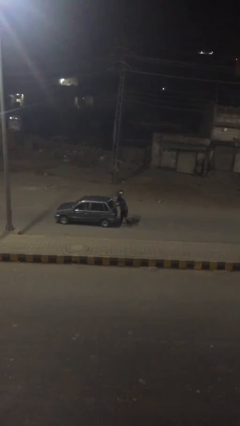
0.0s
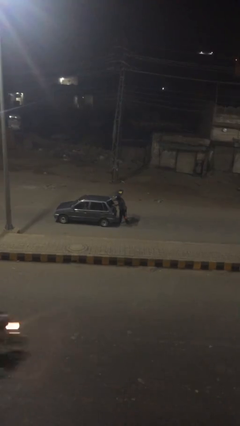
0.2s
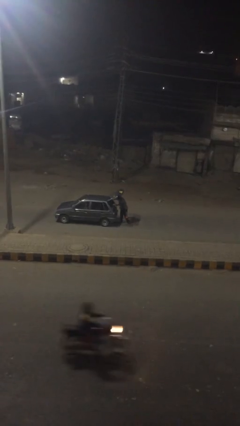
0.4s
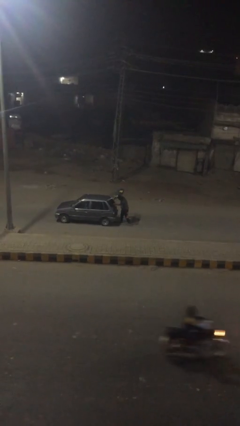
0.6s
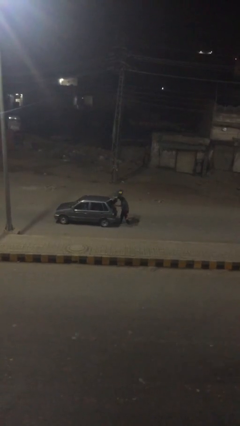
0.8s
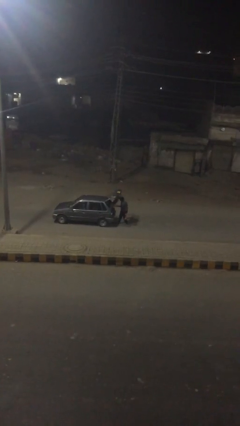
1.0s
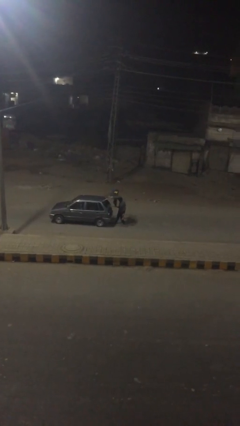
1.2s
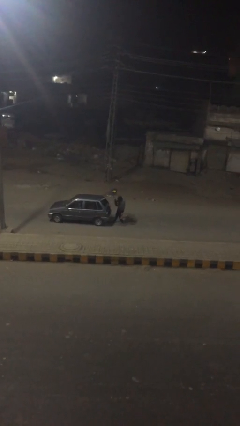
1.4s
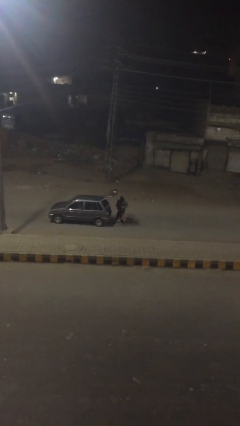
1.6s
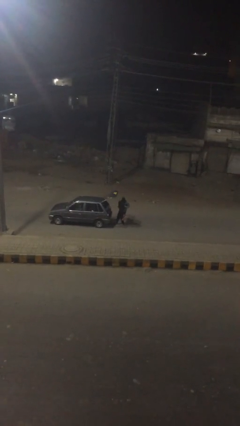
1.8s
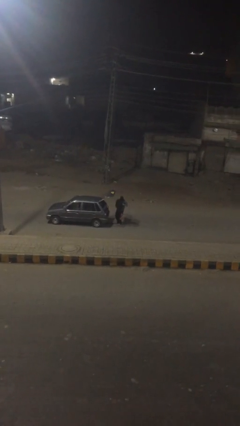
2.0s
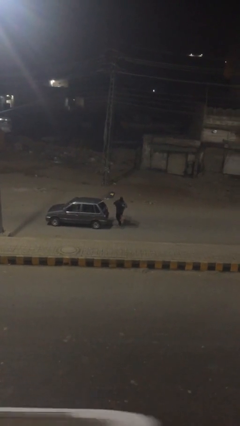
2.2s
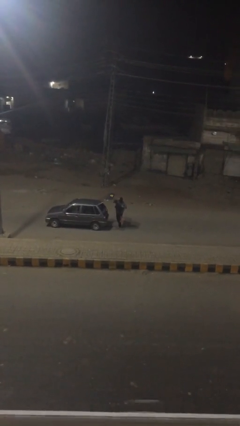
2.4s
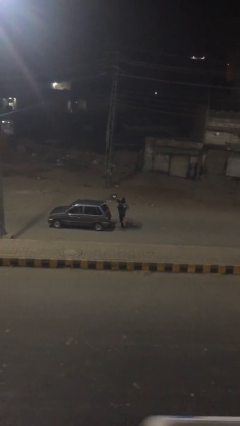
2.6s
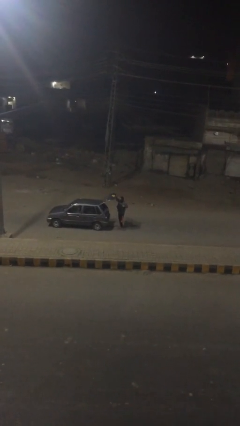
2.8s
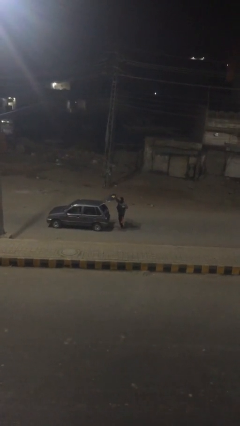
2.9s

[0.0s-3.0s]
person unloads car

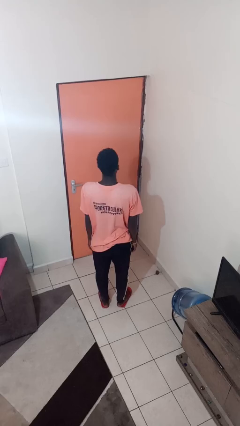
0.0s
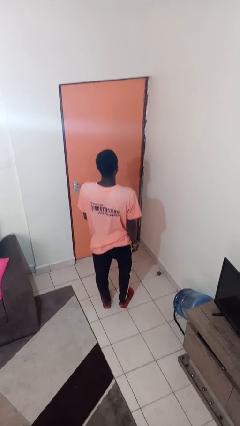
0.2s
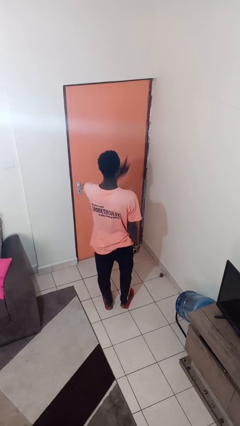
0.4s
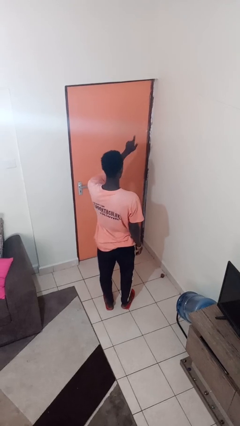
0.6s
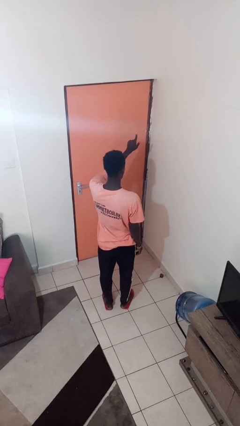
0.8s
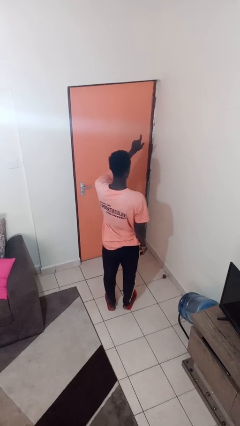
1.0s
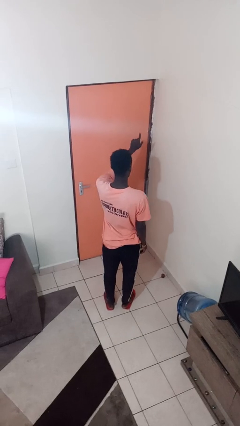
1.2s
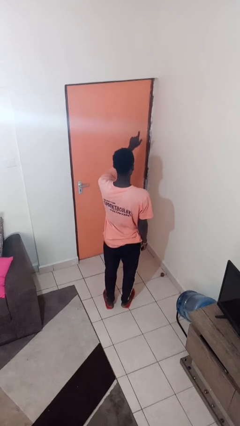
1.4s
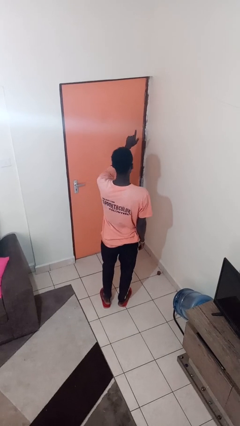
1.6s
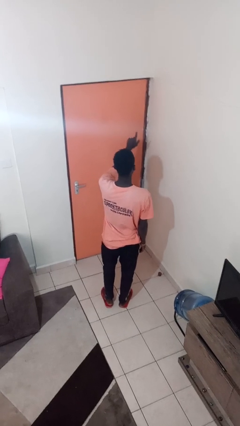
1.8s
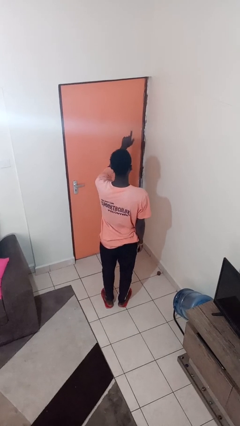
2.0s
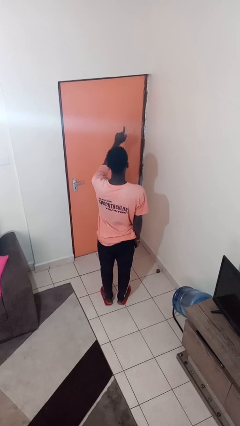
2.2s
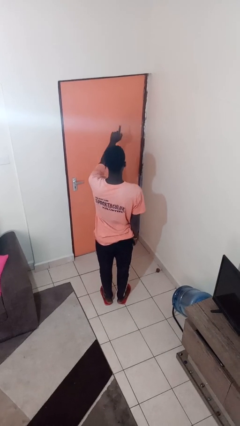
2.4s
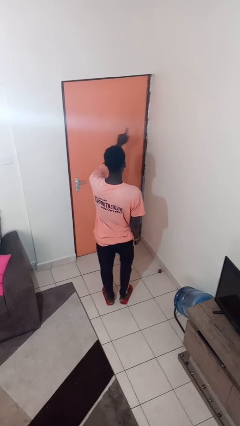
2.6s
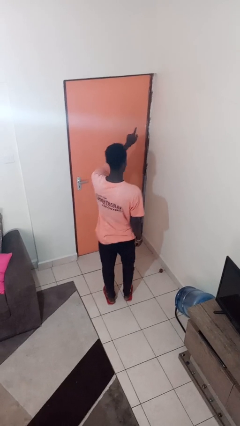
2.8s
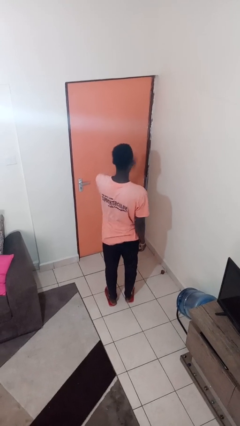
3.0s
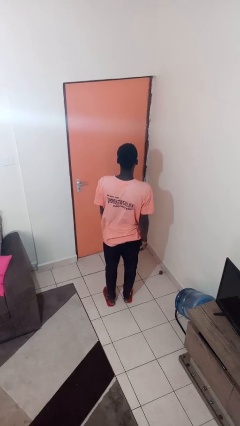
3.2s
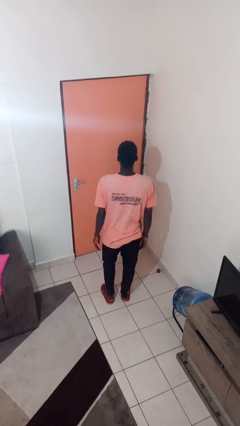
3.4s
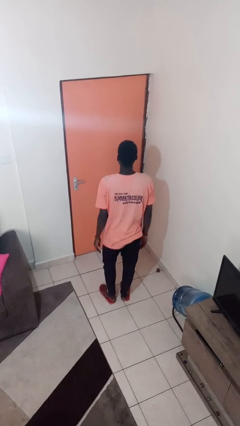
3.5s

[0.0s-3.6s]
person gestures number one

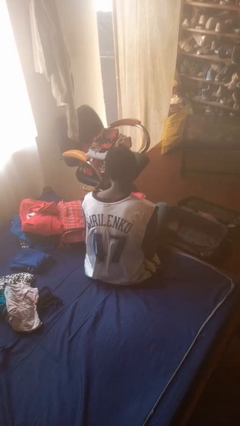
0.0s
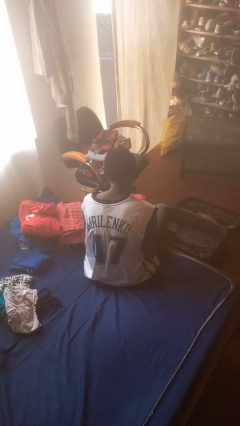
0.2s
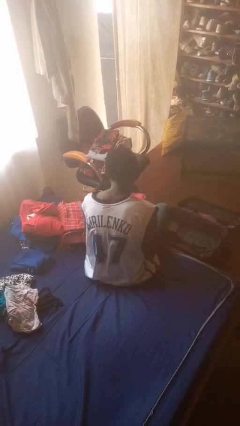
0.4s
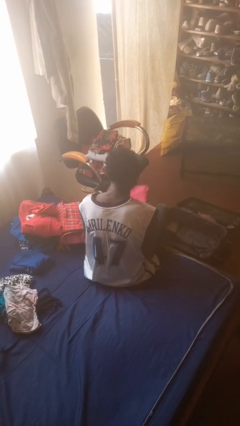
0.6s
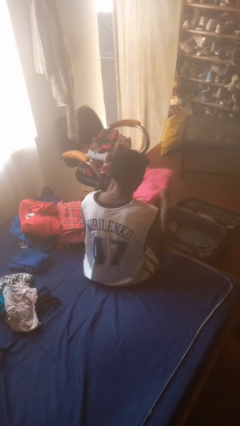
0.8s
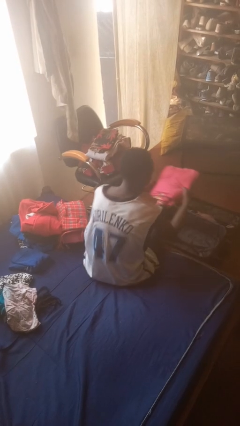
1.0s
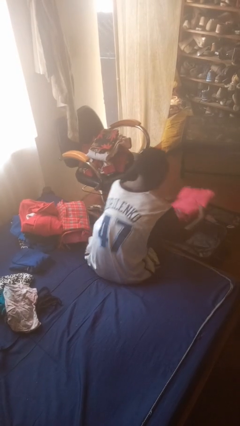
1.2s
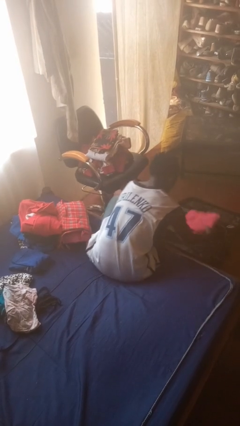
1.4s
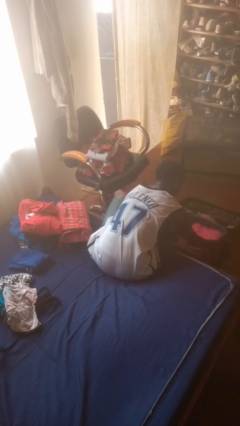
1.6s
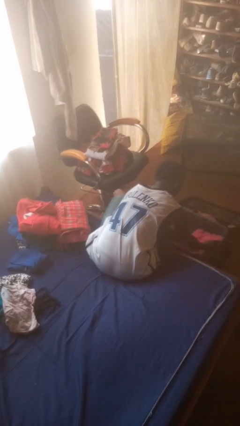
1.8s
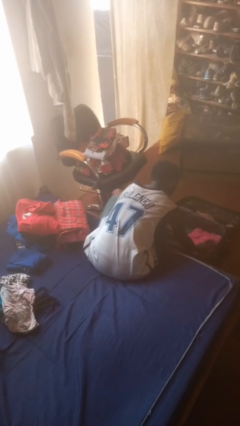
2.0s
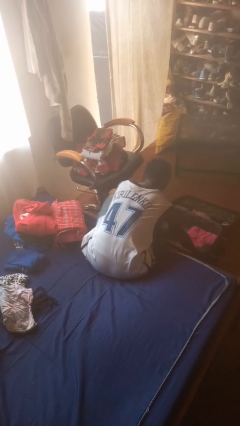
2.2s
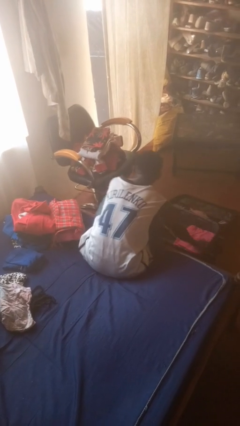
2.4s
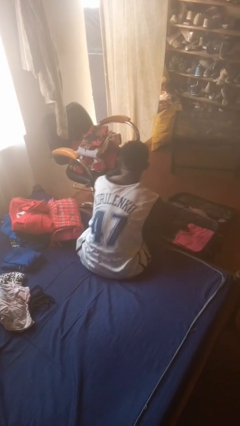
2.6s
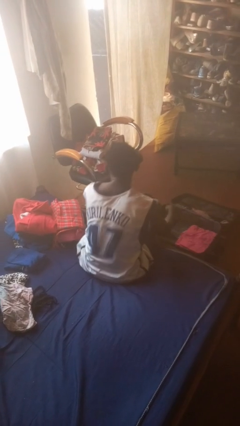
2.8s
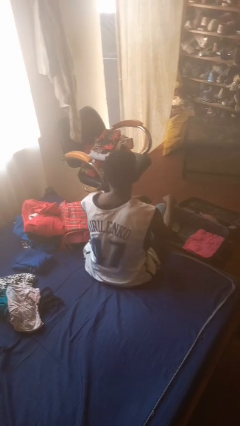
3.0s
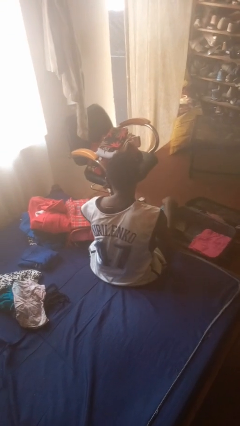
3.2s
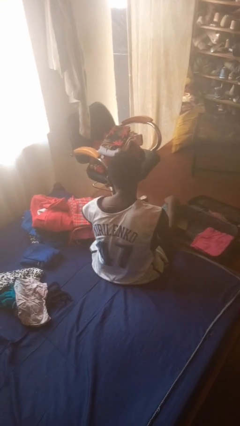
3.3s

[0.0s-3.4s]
person loads clothes into suitcase

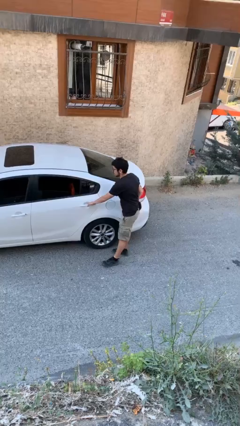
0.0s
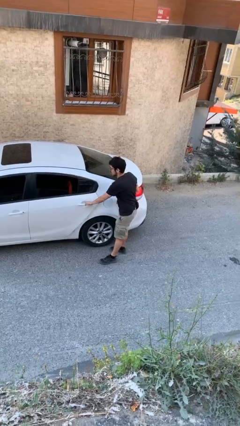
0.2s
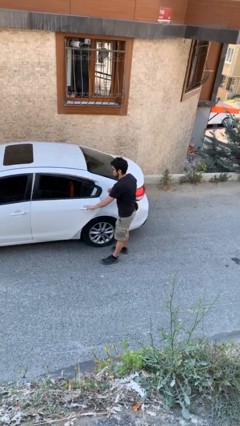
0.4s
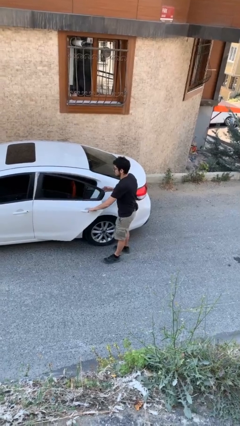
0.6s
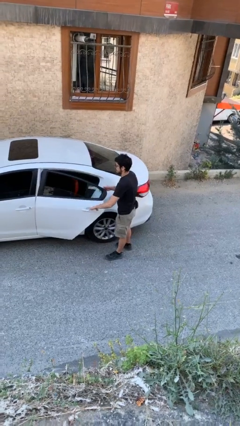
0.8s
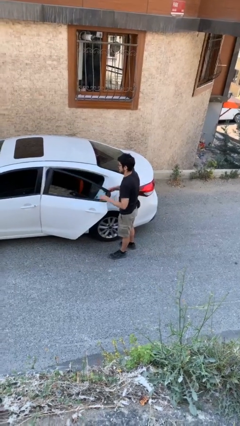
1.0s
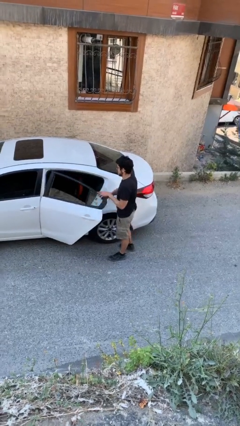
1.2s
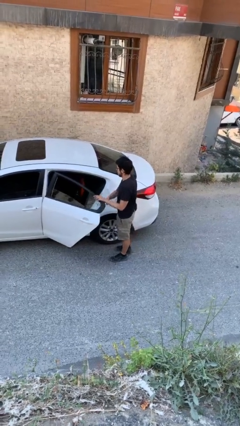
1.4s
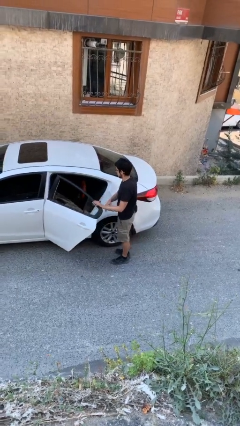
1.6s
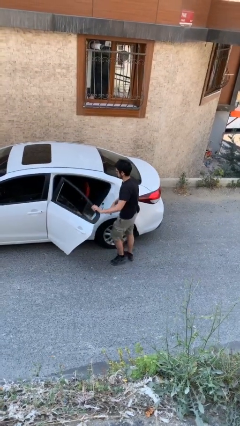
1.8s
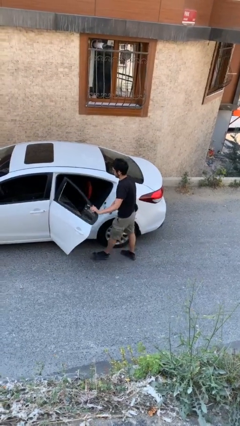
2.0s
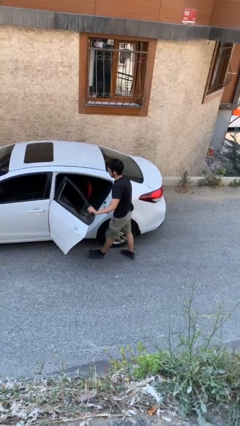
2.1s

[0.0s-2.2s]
person opens car door

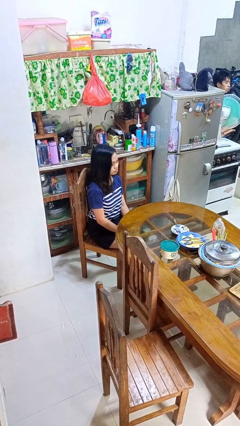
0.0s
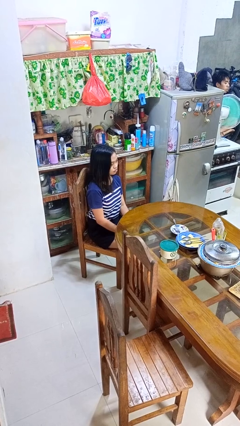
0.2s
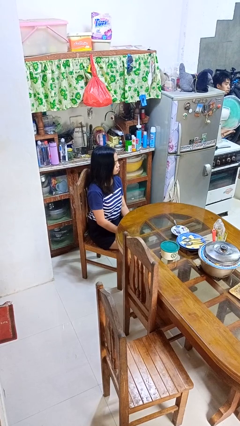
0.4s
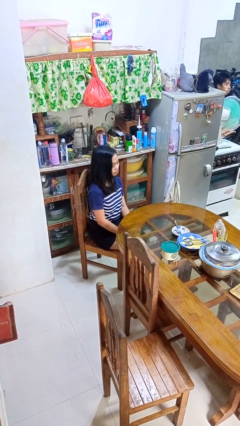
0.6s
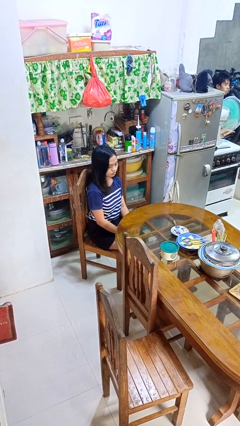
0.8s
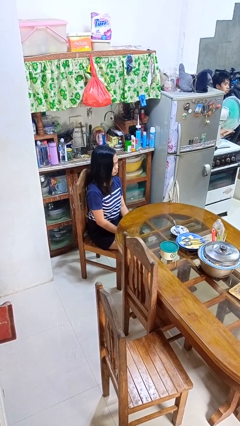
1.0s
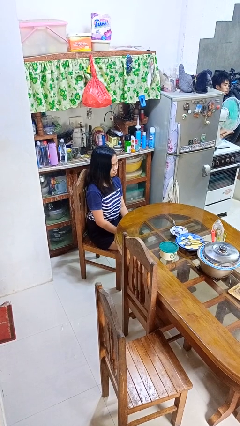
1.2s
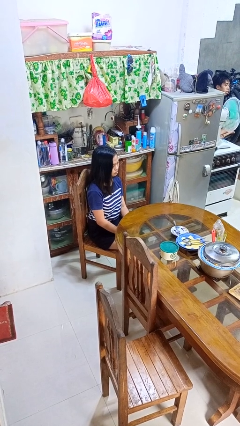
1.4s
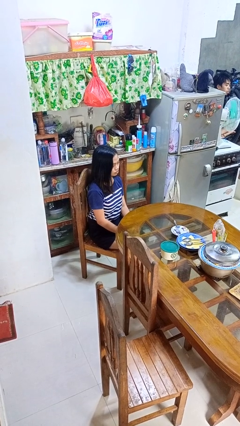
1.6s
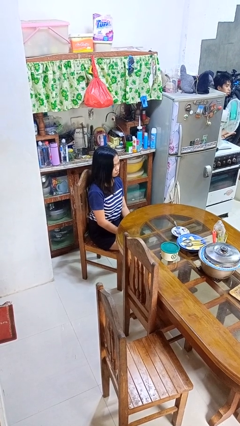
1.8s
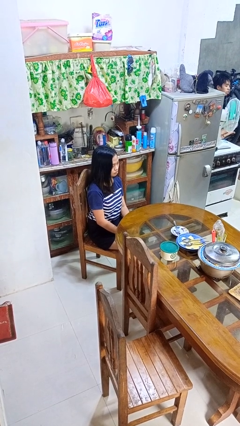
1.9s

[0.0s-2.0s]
person shakes head

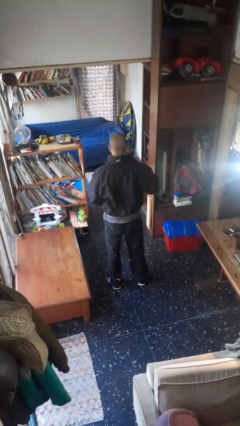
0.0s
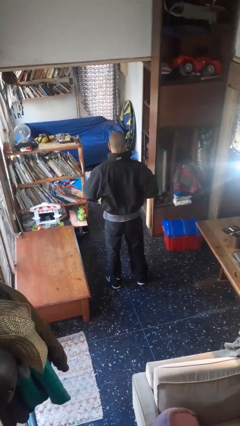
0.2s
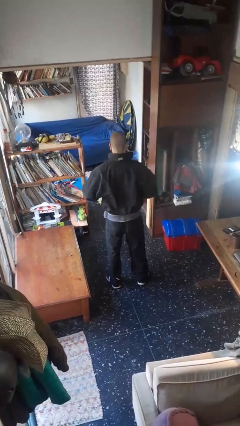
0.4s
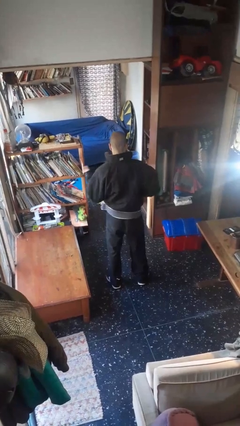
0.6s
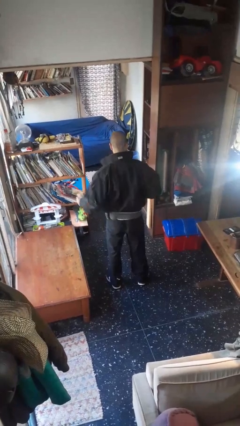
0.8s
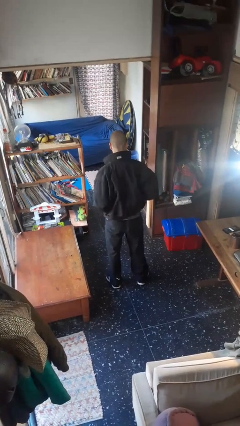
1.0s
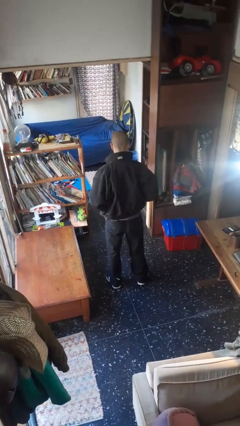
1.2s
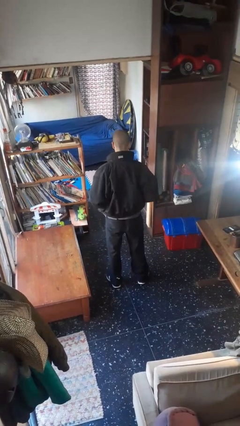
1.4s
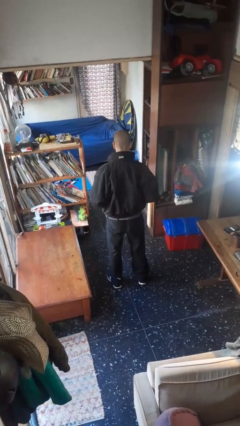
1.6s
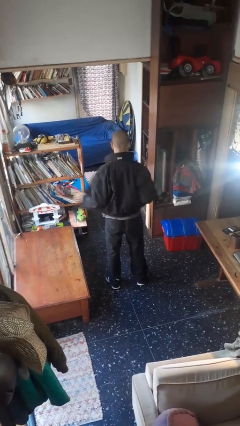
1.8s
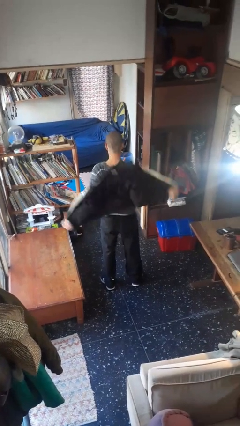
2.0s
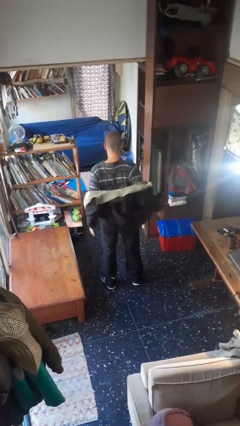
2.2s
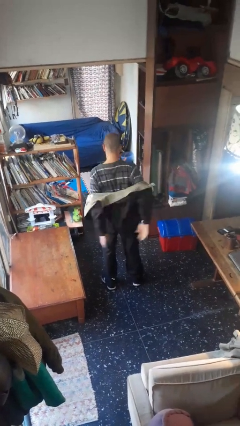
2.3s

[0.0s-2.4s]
person unzips jacket

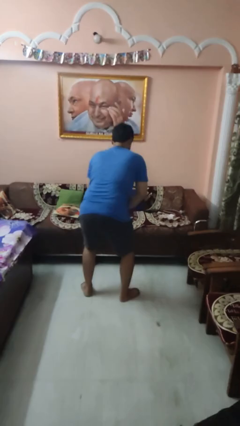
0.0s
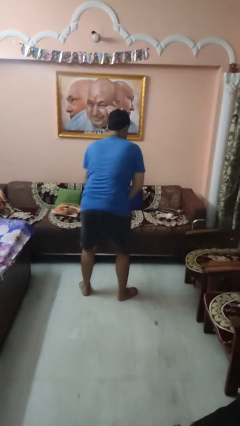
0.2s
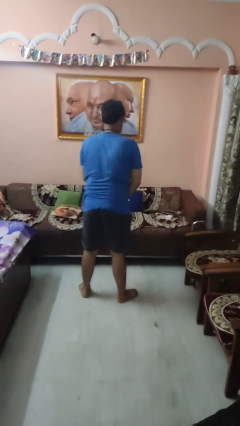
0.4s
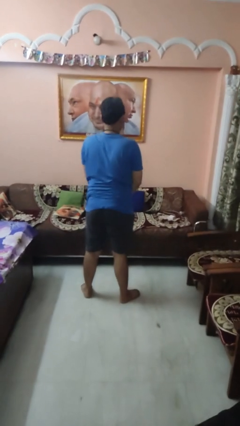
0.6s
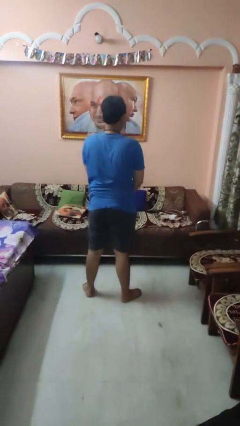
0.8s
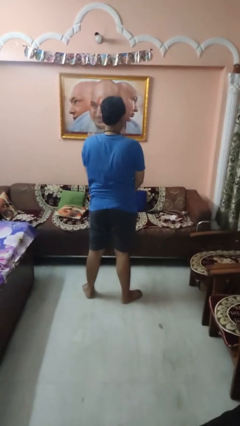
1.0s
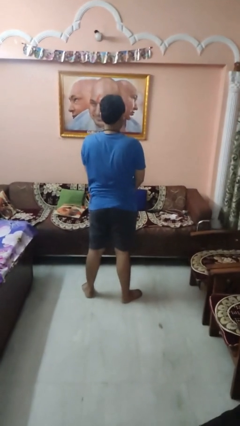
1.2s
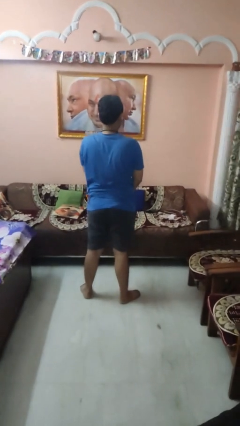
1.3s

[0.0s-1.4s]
person stands up
